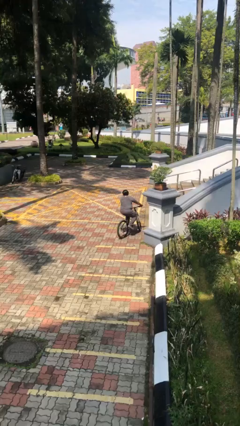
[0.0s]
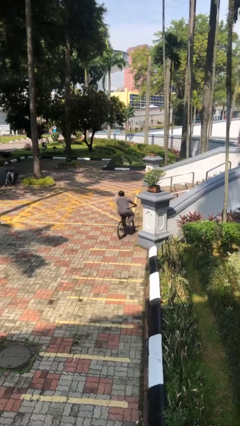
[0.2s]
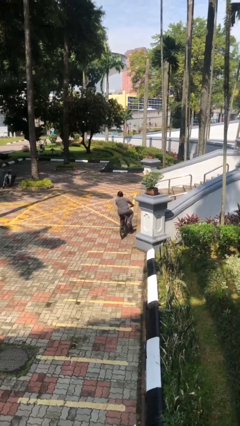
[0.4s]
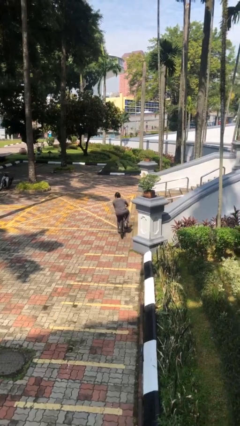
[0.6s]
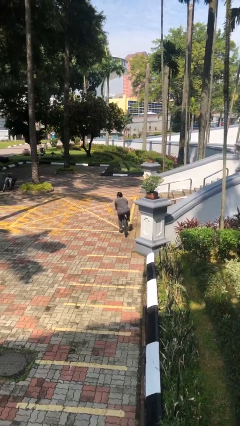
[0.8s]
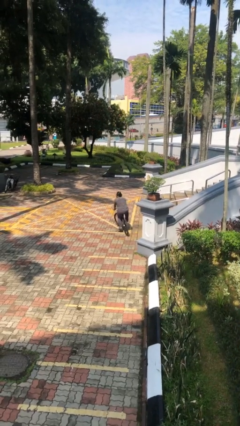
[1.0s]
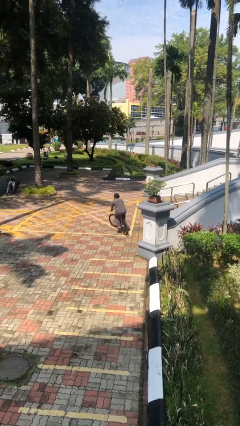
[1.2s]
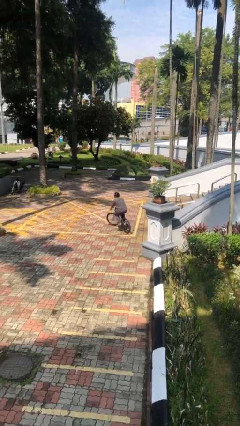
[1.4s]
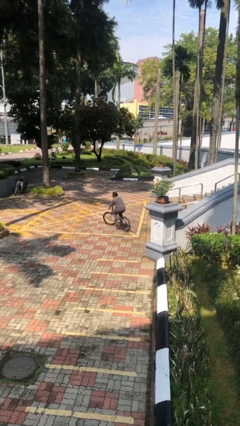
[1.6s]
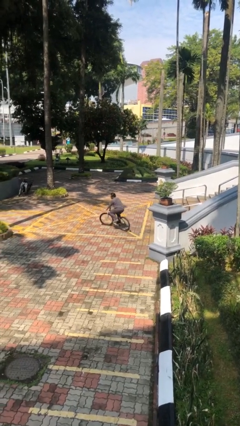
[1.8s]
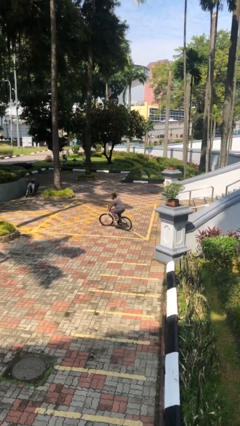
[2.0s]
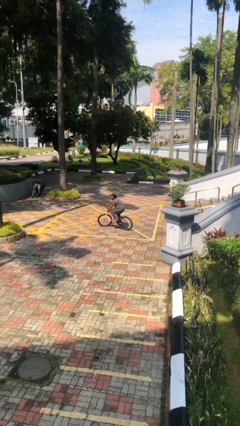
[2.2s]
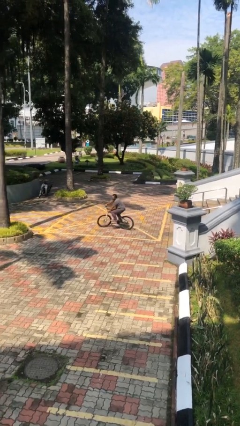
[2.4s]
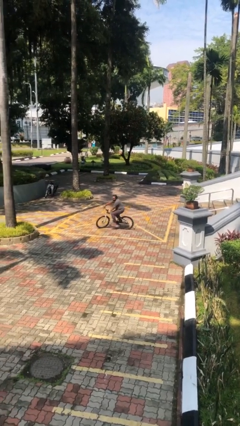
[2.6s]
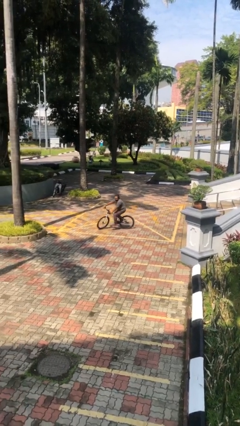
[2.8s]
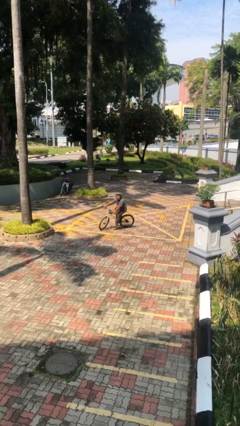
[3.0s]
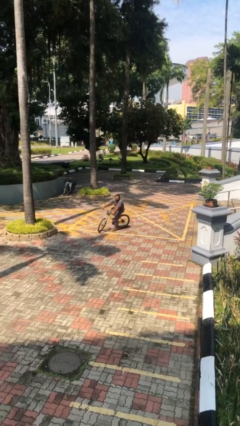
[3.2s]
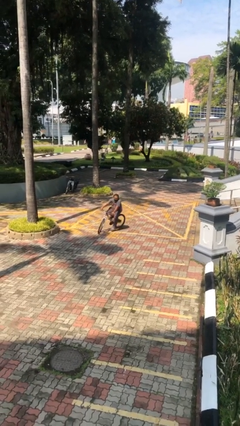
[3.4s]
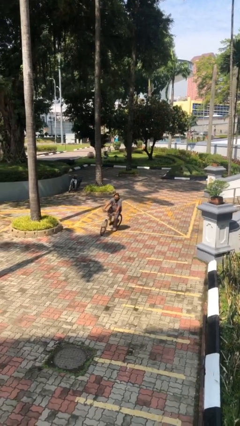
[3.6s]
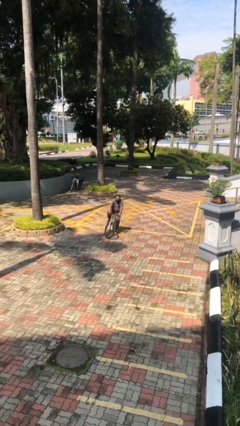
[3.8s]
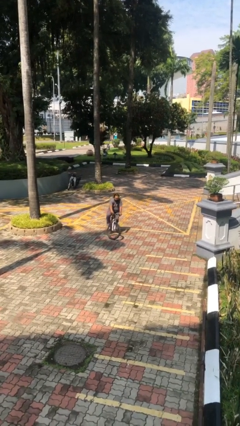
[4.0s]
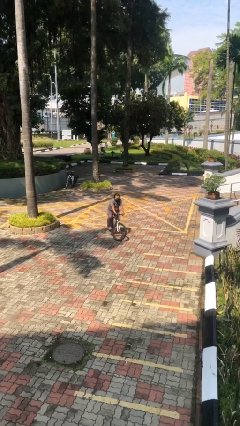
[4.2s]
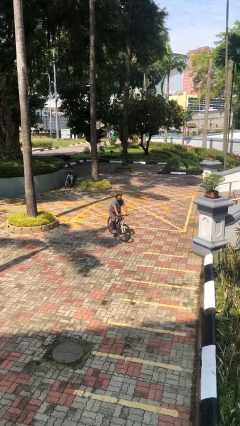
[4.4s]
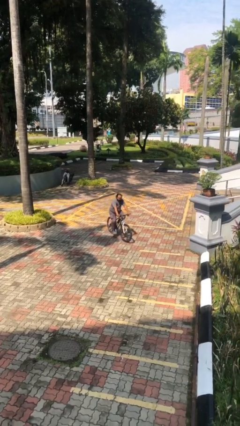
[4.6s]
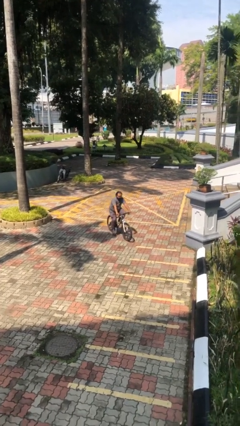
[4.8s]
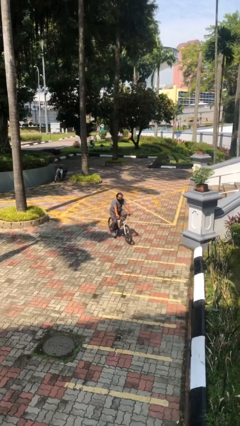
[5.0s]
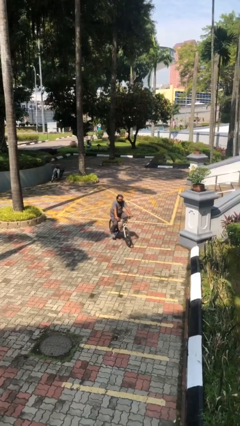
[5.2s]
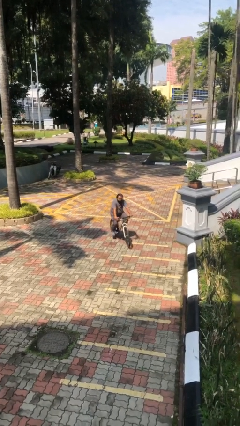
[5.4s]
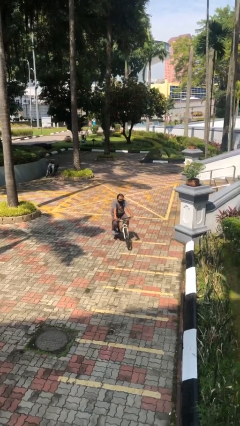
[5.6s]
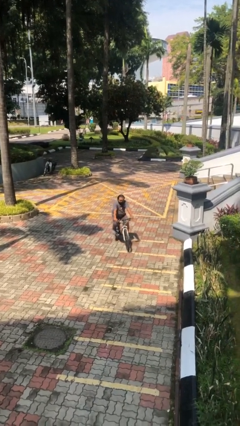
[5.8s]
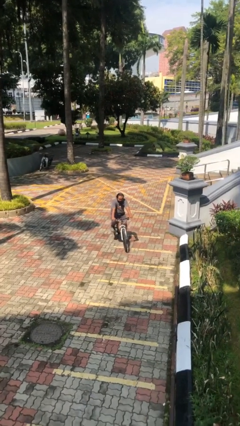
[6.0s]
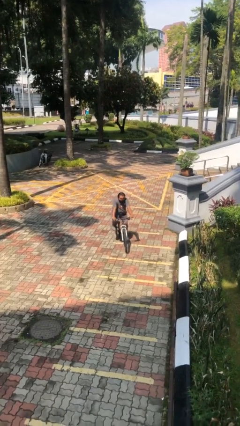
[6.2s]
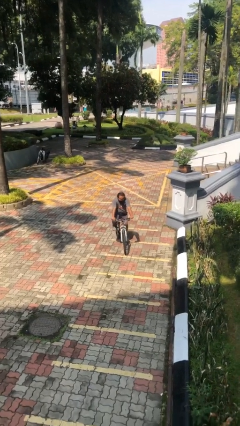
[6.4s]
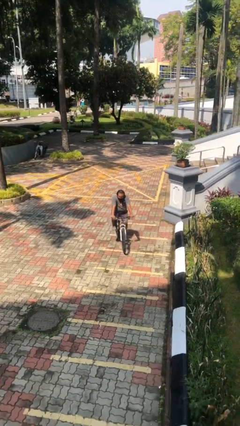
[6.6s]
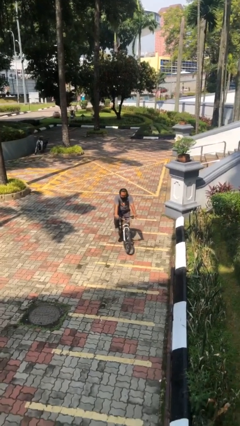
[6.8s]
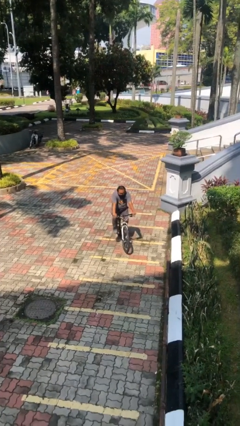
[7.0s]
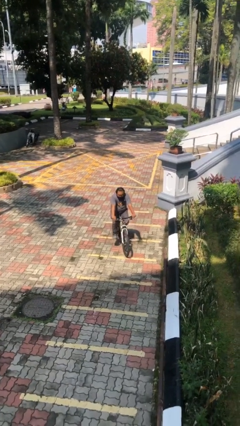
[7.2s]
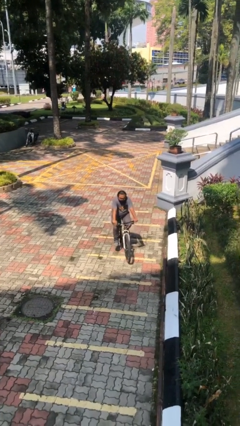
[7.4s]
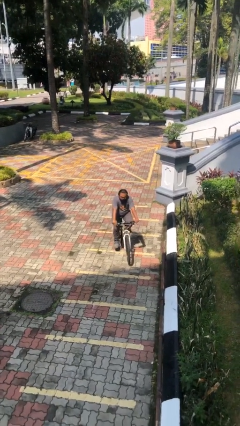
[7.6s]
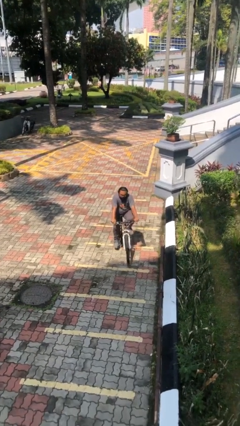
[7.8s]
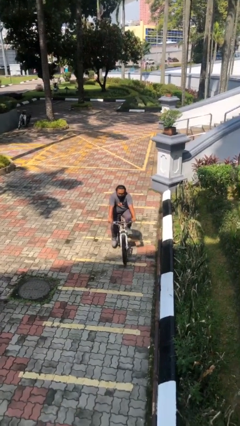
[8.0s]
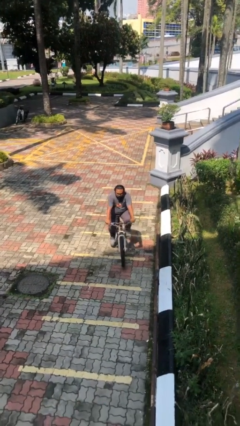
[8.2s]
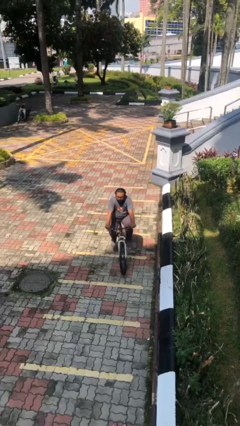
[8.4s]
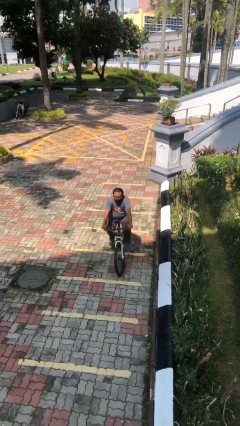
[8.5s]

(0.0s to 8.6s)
person rides bicycle

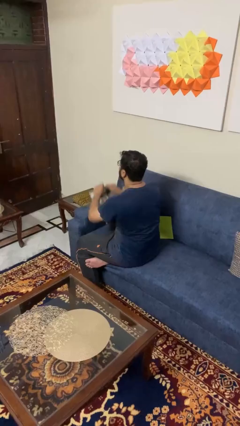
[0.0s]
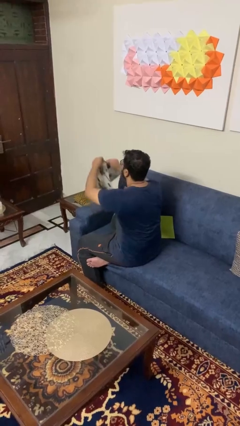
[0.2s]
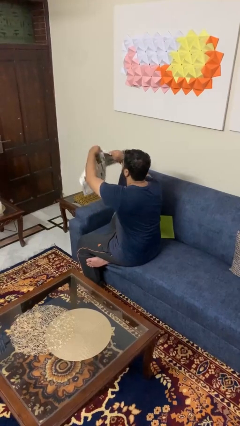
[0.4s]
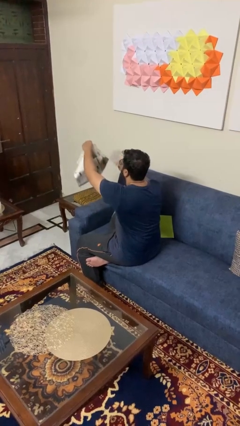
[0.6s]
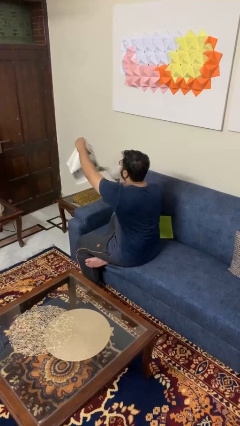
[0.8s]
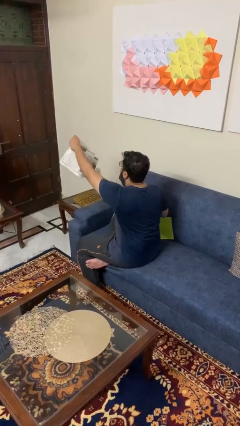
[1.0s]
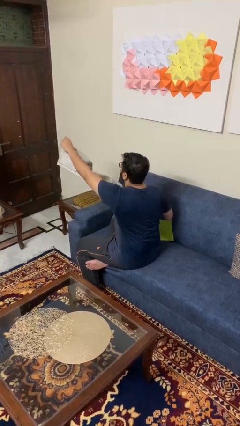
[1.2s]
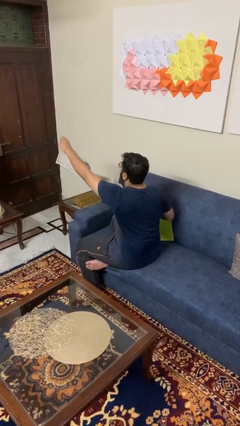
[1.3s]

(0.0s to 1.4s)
person tears paper

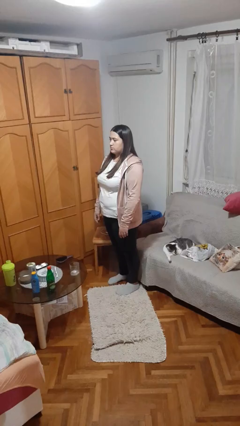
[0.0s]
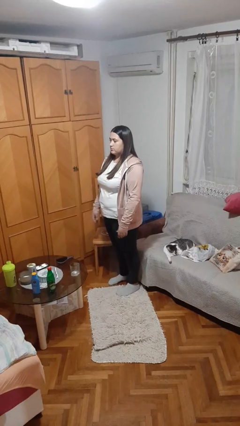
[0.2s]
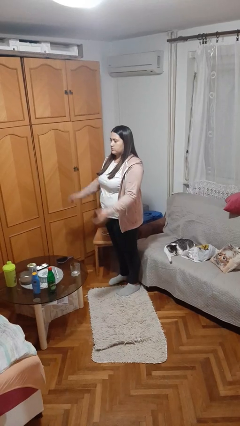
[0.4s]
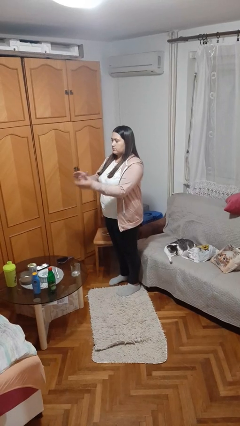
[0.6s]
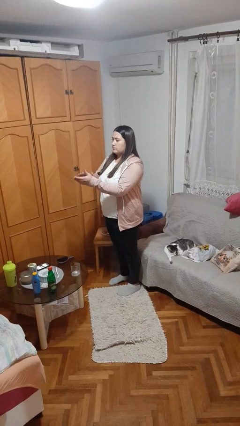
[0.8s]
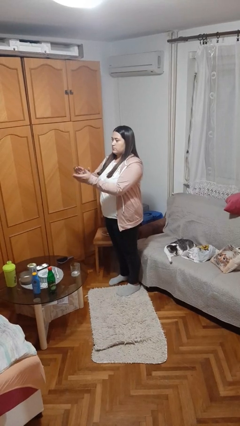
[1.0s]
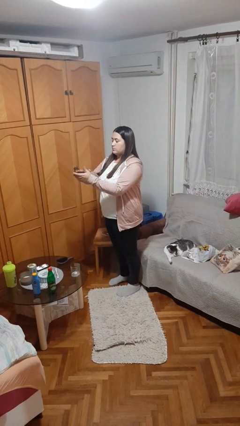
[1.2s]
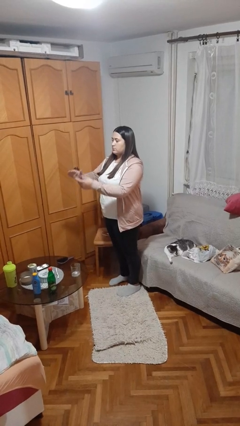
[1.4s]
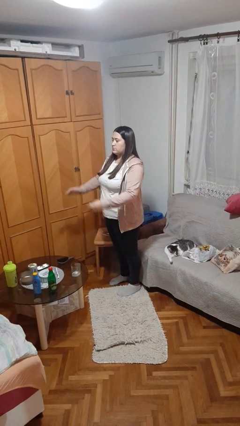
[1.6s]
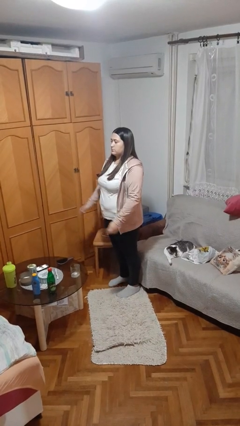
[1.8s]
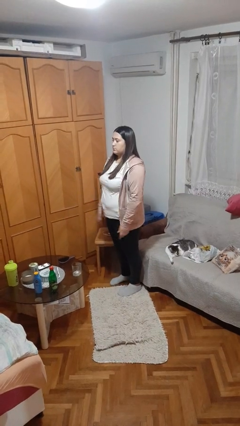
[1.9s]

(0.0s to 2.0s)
person claps hands

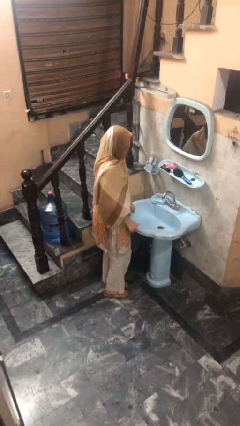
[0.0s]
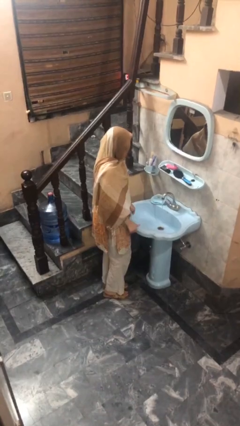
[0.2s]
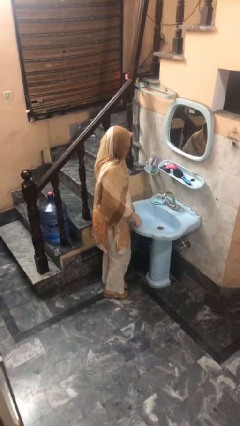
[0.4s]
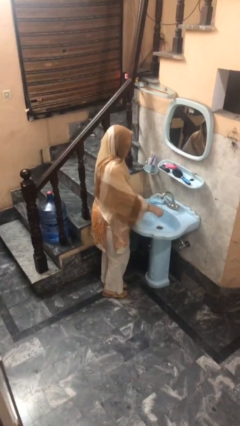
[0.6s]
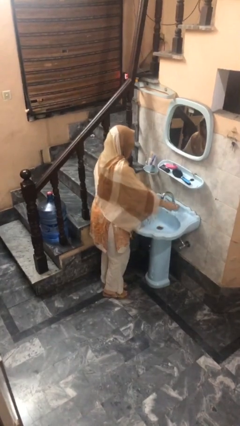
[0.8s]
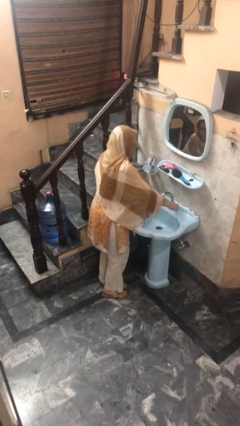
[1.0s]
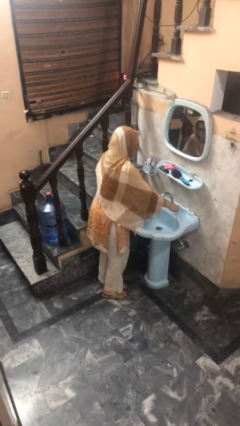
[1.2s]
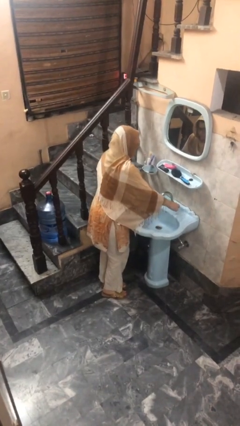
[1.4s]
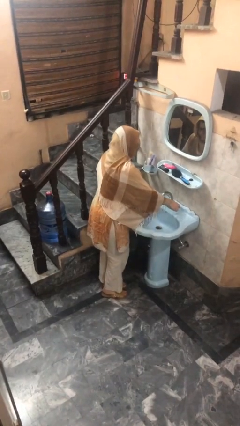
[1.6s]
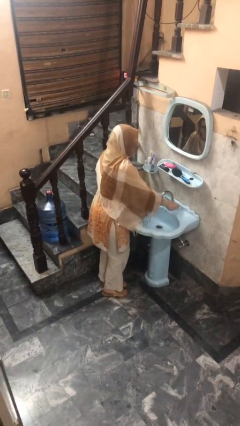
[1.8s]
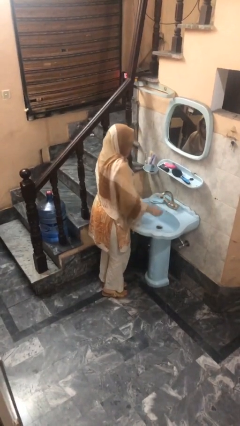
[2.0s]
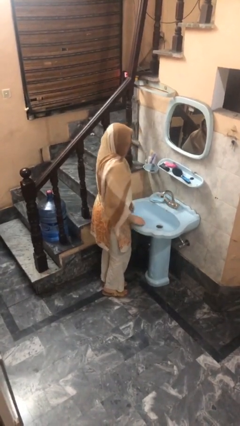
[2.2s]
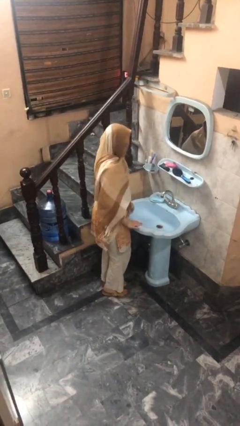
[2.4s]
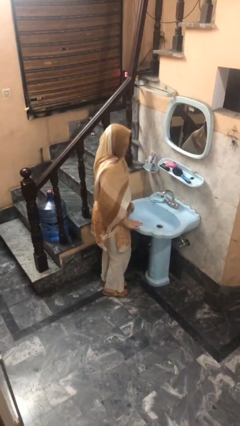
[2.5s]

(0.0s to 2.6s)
person turns off faucet

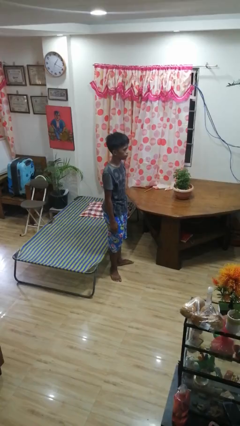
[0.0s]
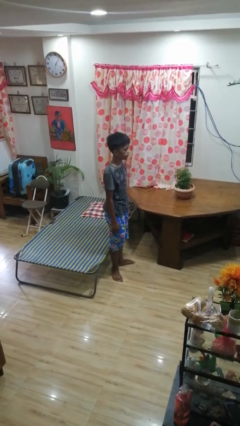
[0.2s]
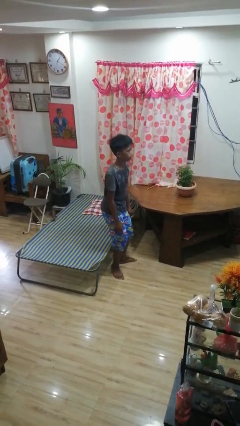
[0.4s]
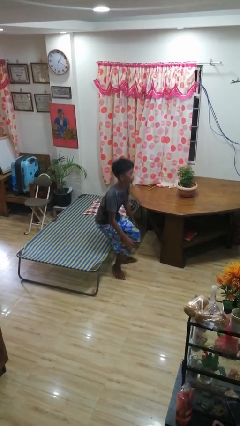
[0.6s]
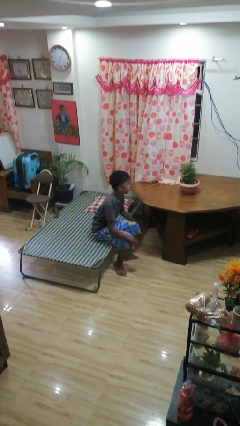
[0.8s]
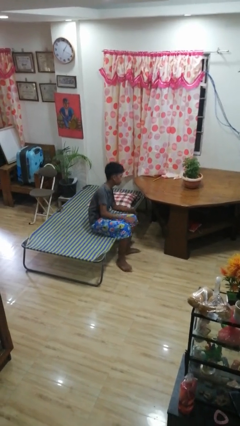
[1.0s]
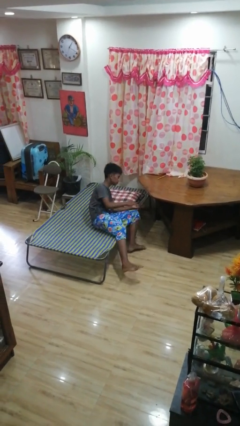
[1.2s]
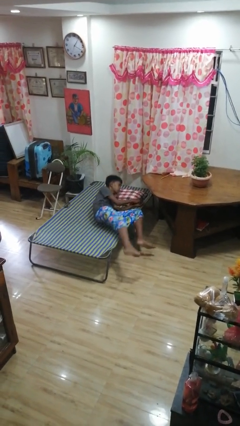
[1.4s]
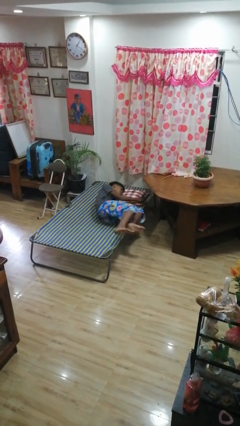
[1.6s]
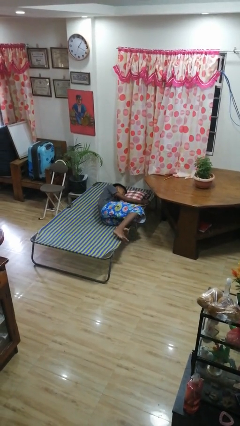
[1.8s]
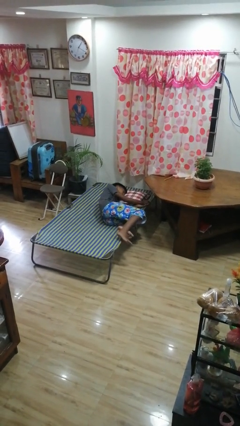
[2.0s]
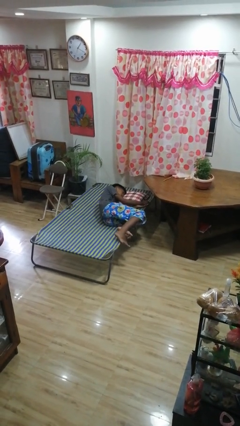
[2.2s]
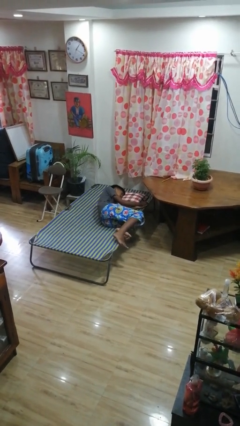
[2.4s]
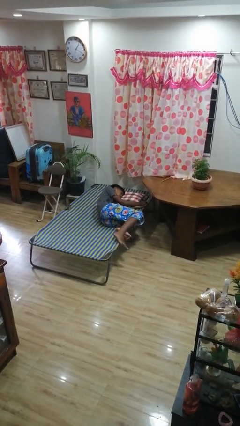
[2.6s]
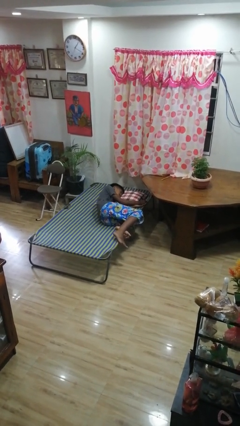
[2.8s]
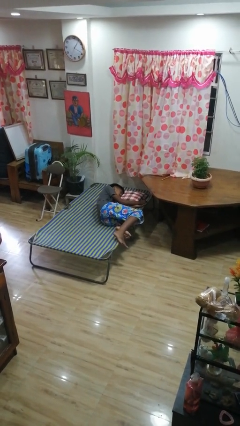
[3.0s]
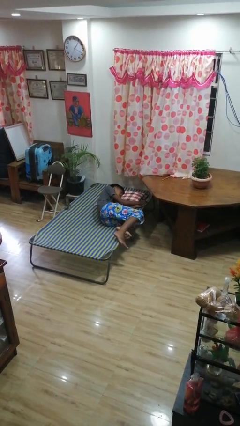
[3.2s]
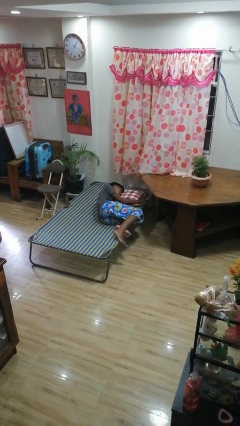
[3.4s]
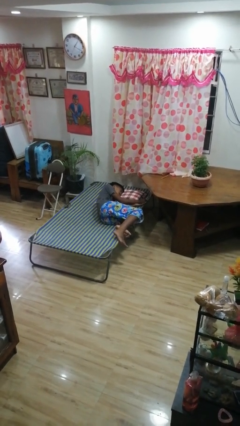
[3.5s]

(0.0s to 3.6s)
person lies down on bed
